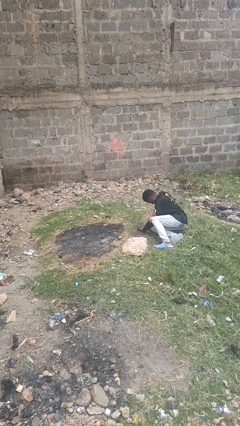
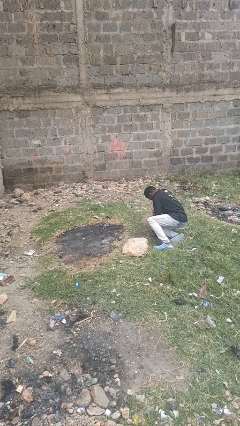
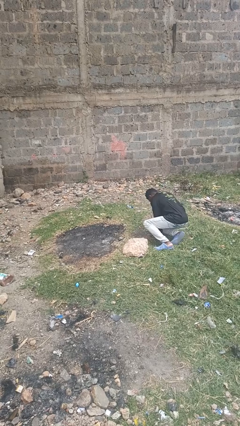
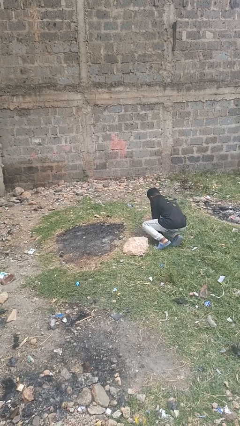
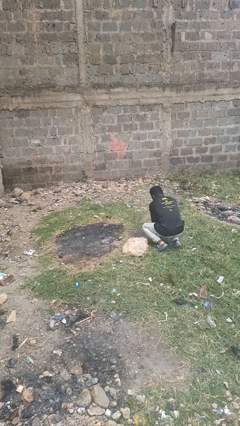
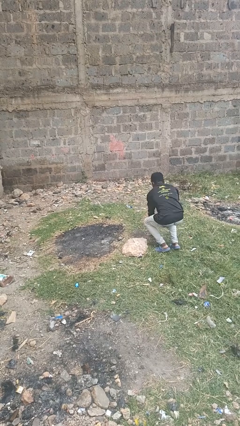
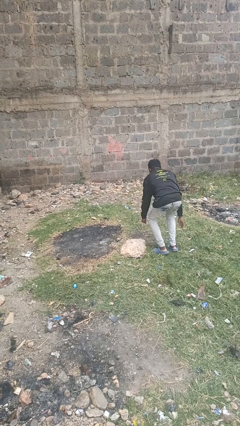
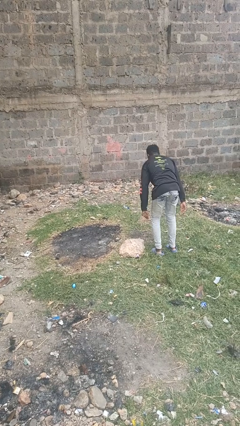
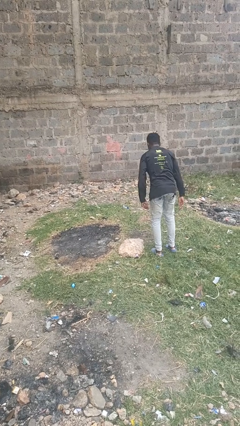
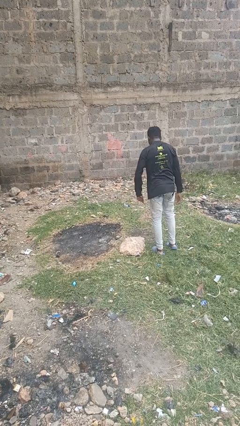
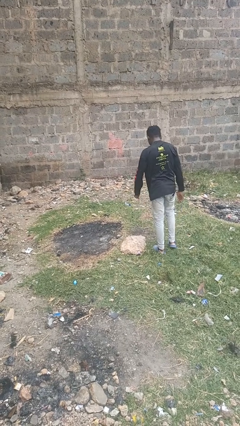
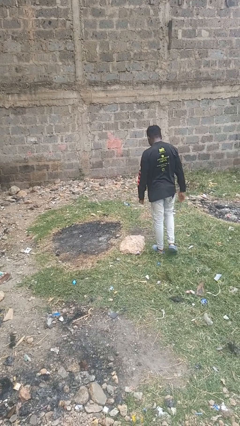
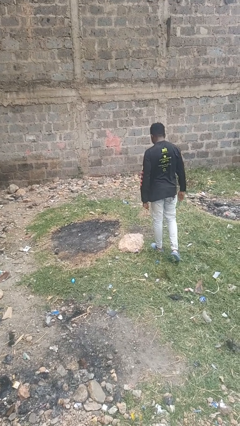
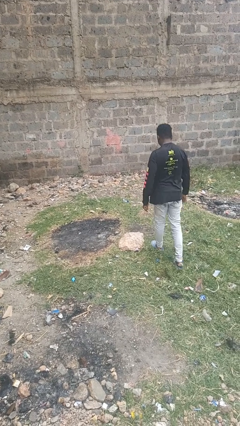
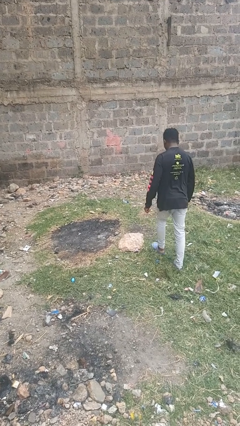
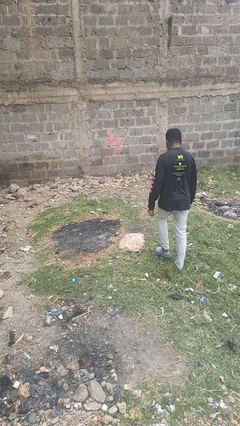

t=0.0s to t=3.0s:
person stands up from floor

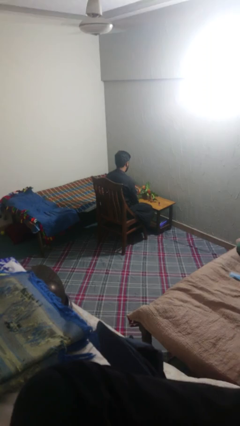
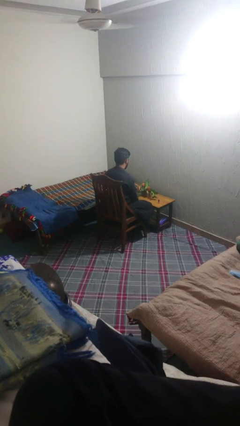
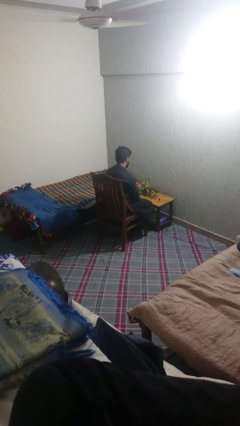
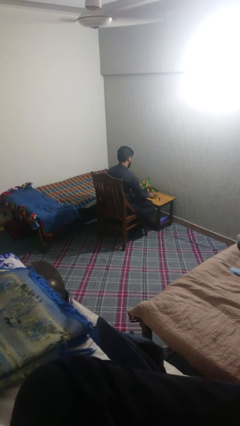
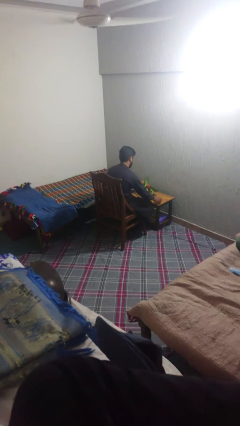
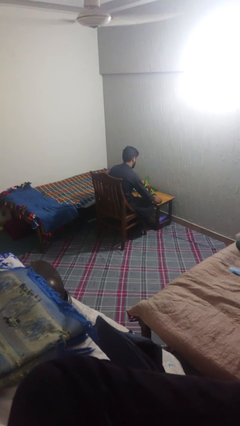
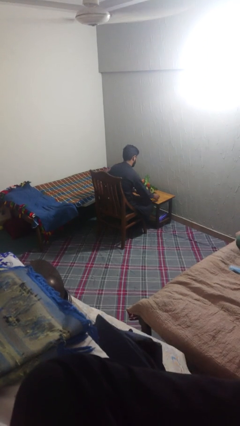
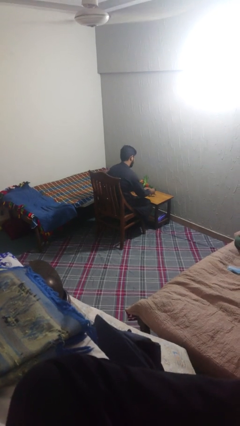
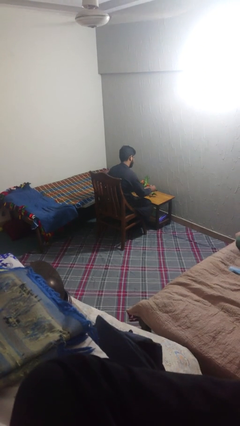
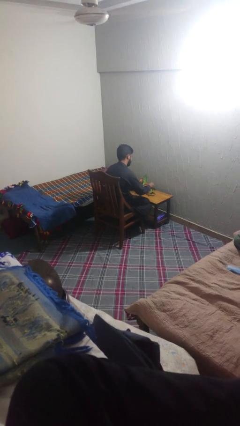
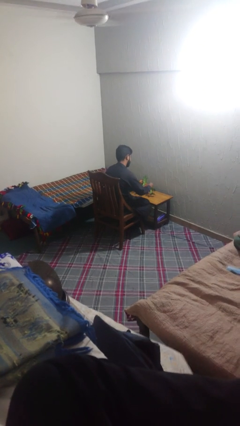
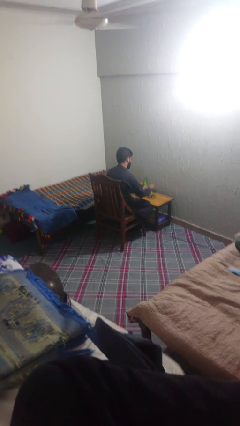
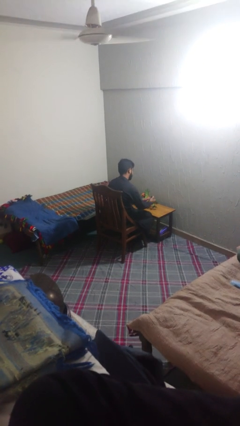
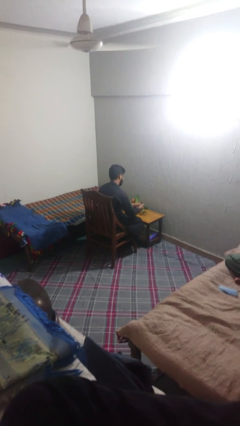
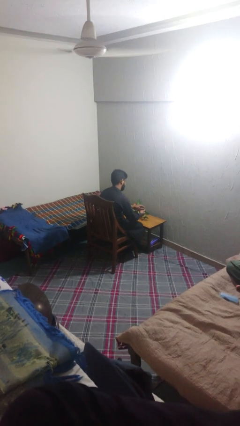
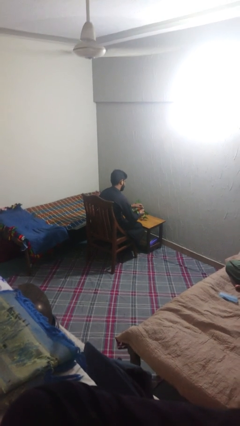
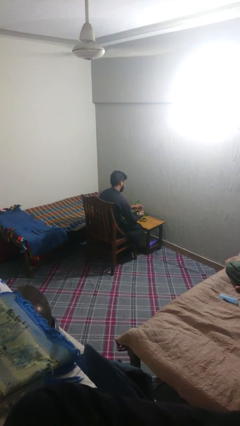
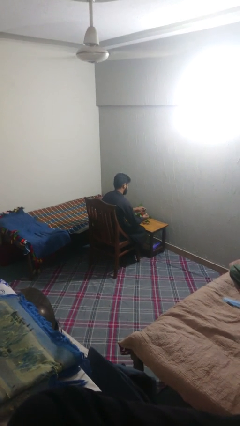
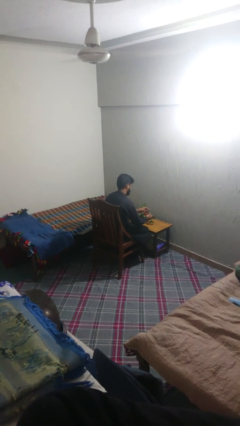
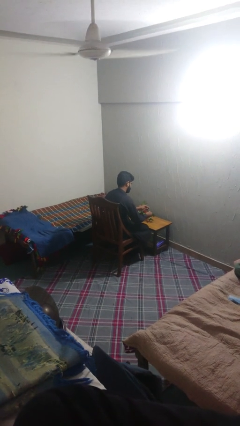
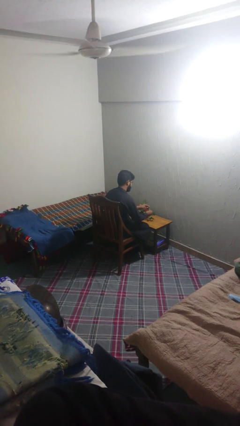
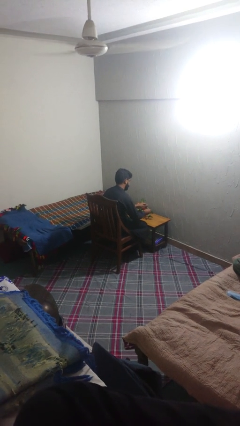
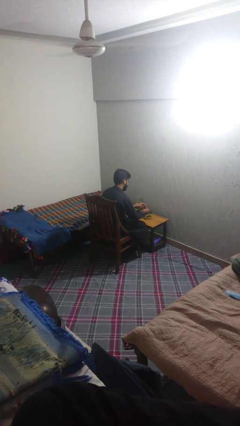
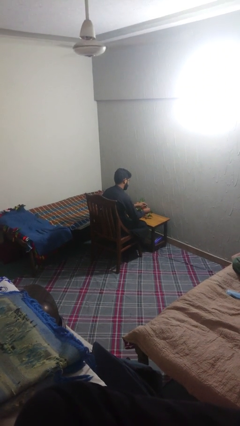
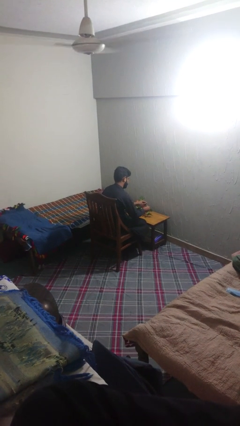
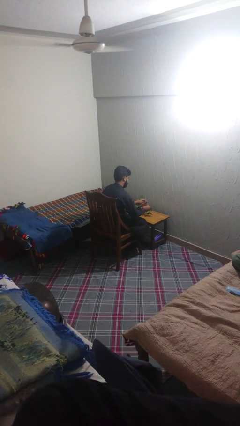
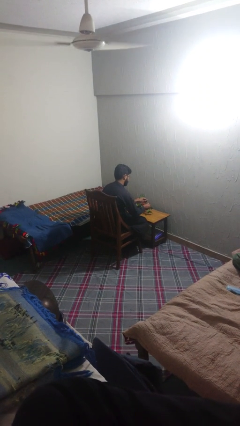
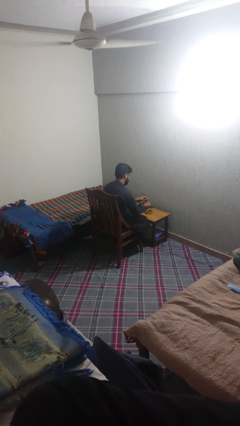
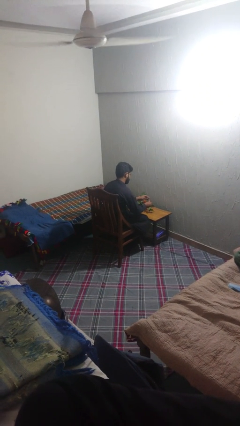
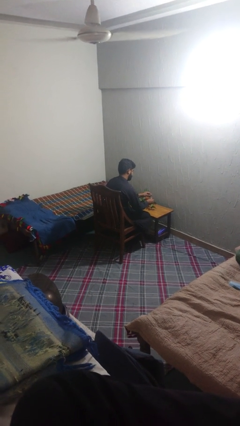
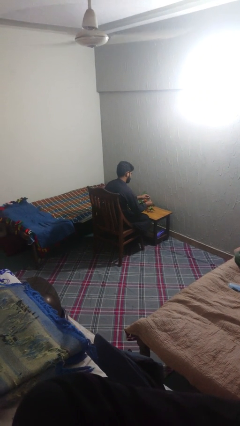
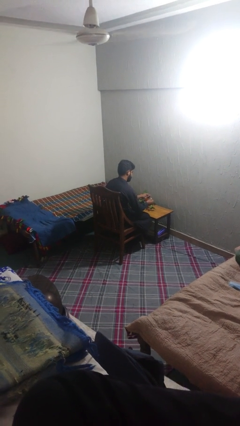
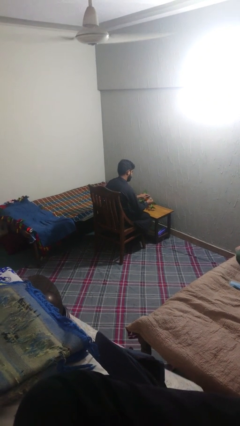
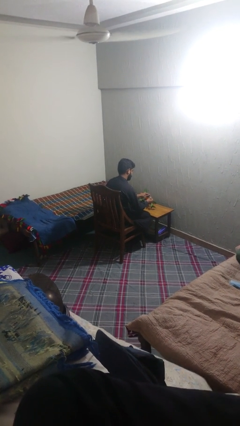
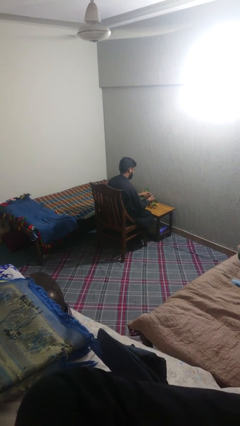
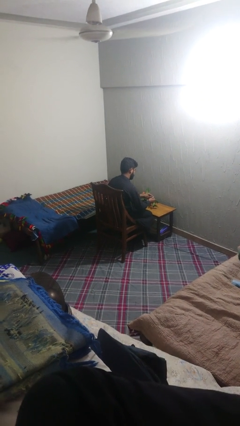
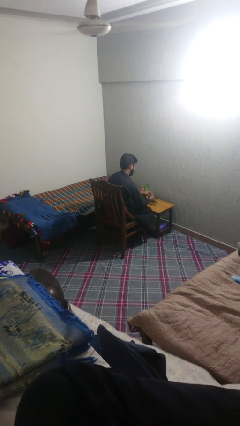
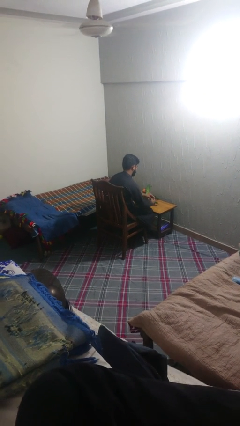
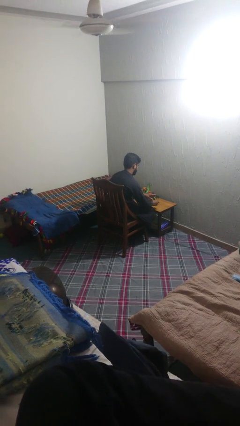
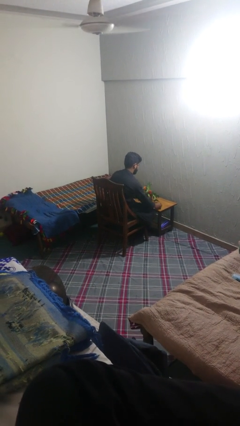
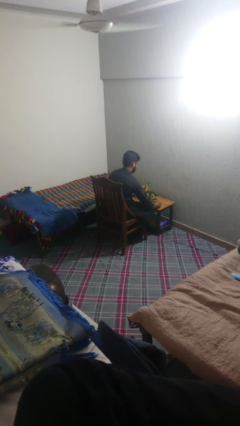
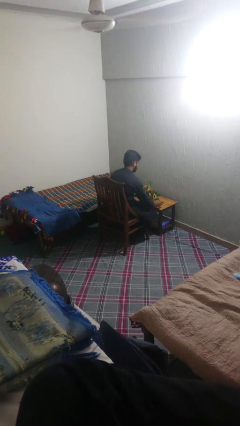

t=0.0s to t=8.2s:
person paints fingernails

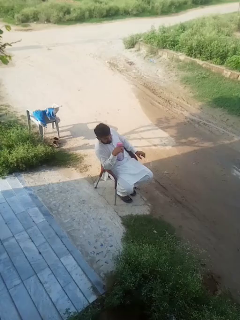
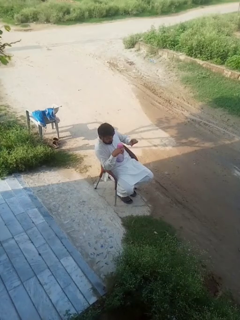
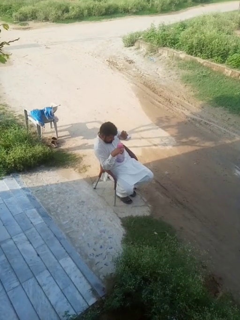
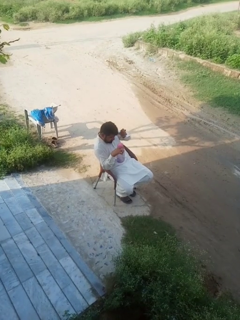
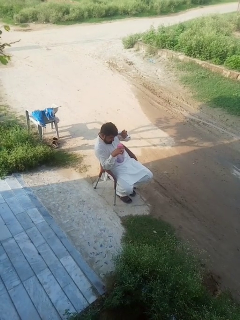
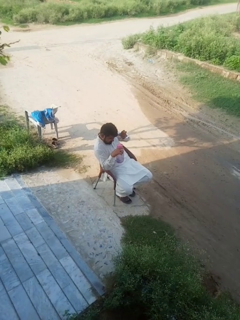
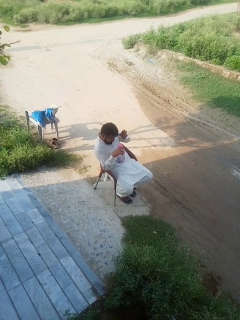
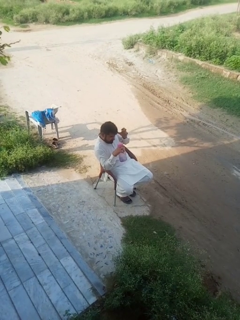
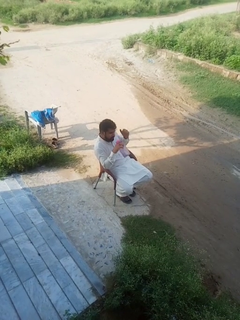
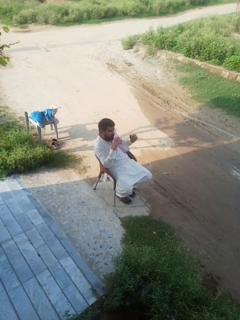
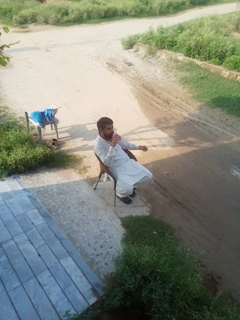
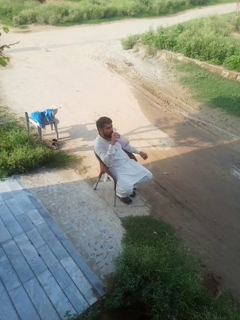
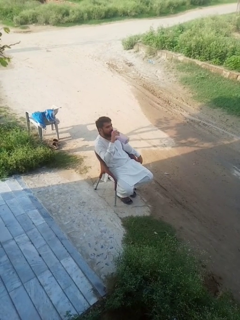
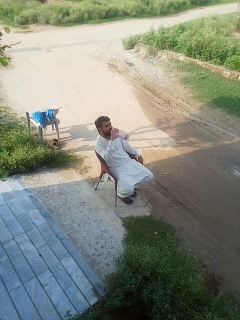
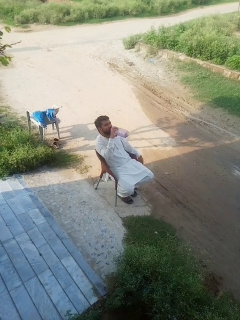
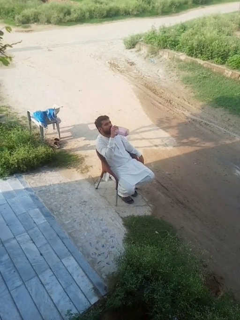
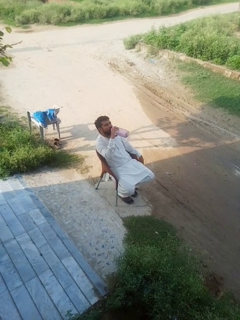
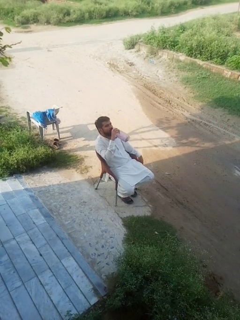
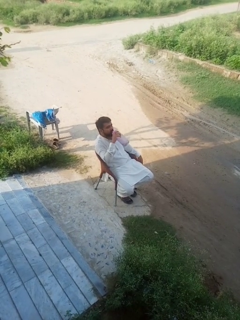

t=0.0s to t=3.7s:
person drinks from bottle

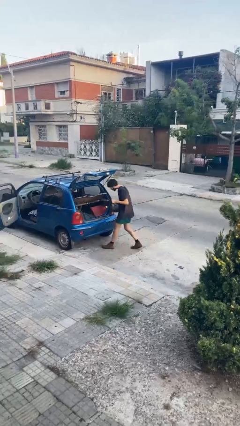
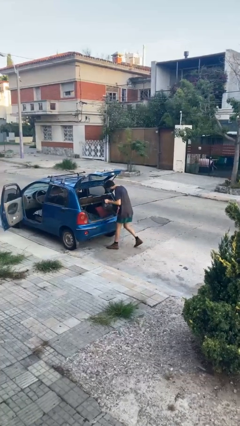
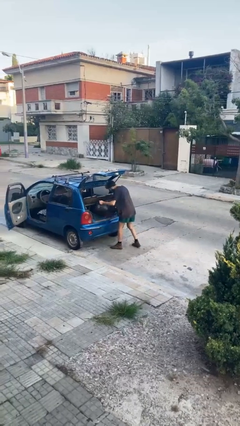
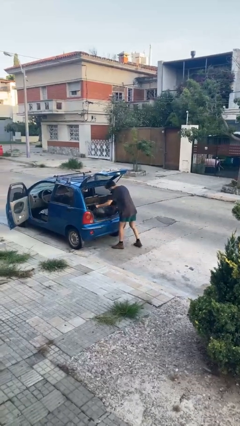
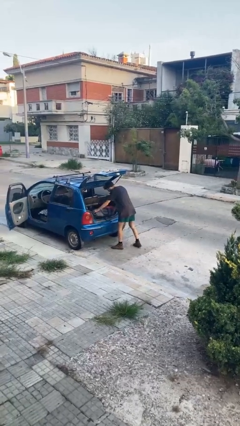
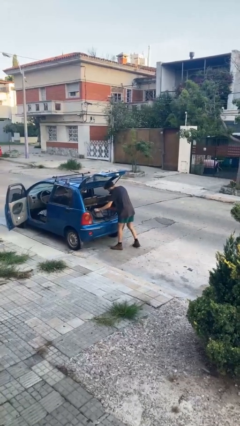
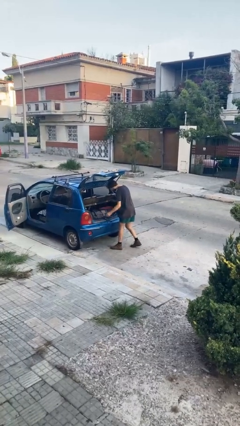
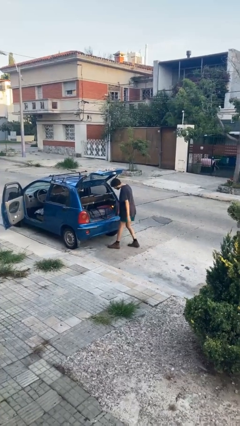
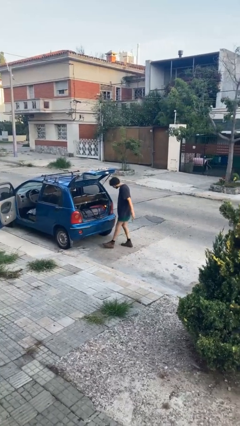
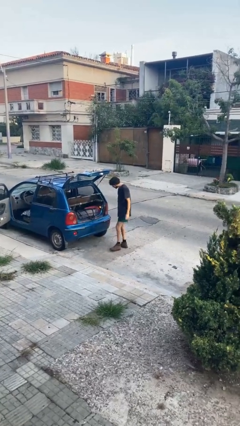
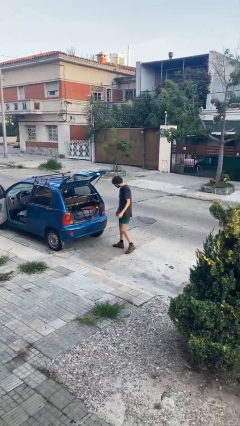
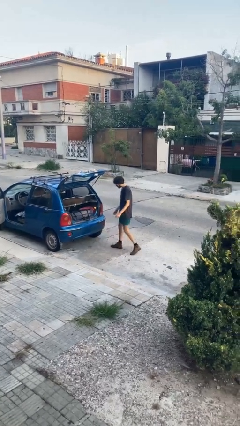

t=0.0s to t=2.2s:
person loads car

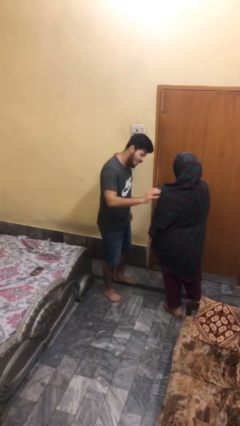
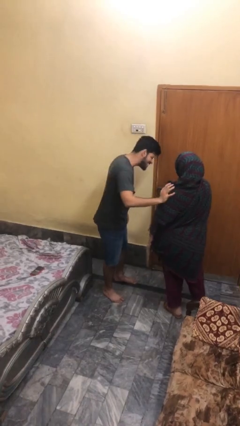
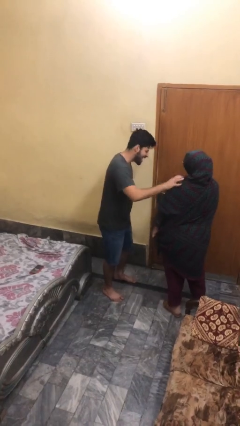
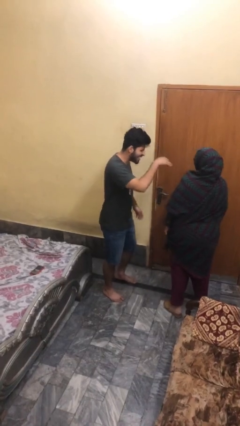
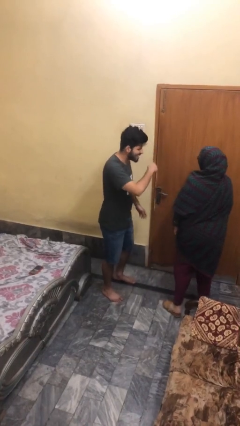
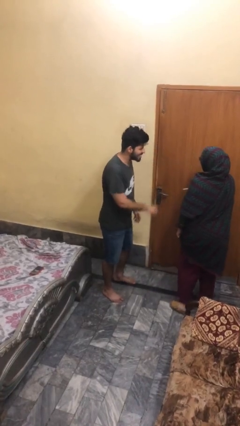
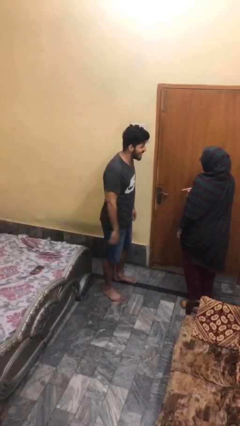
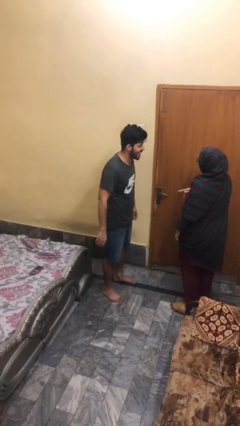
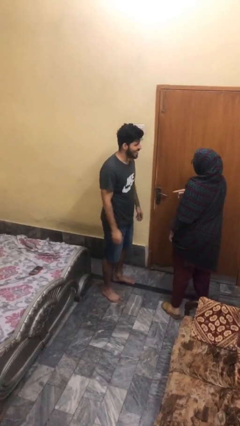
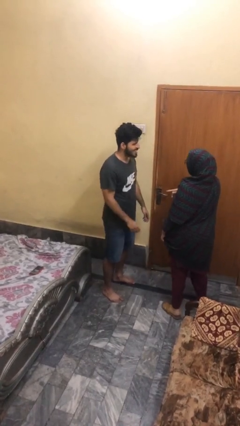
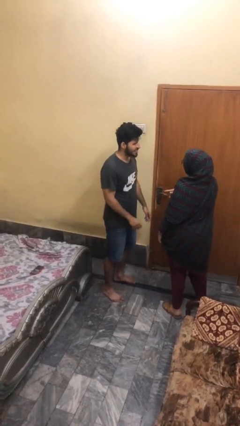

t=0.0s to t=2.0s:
person shoves person
